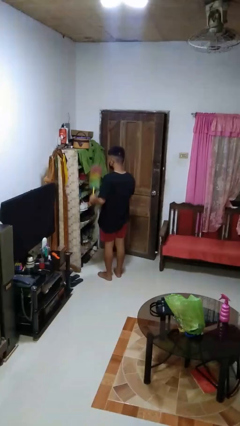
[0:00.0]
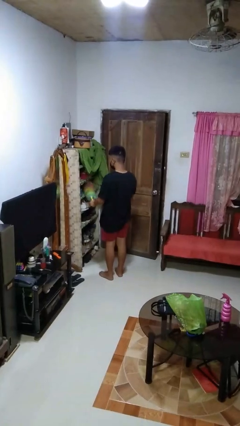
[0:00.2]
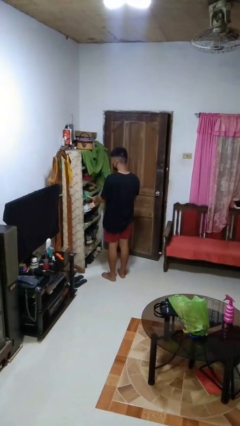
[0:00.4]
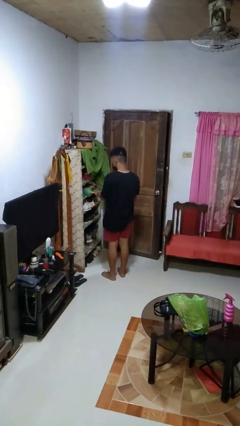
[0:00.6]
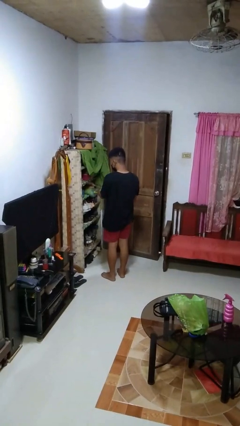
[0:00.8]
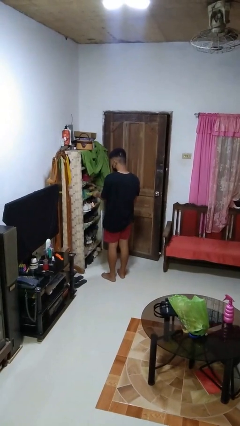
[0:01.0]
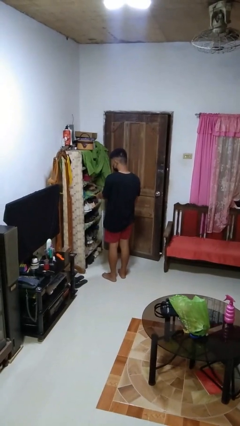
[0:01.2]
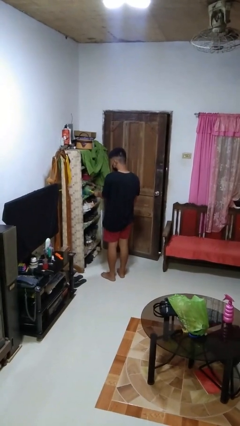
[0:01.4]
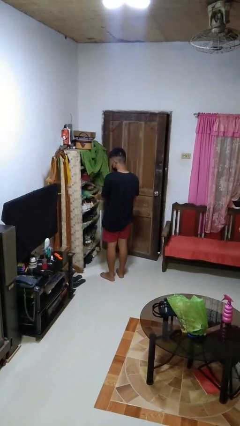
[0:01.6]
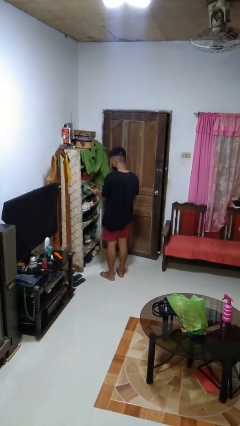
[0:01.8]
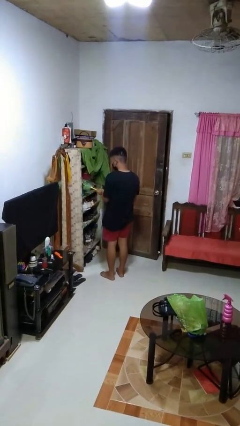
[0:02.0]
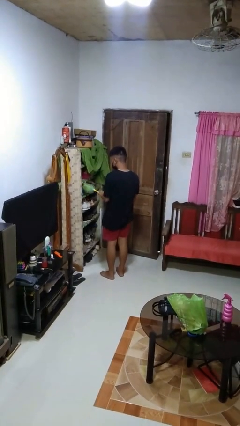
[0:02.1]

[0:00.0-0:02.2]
person dusts furniture

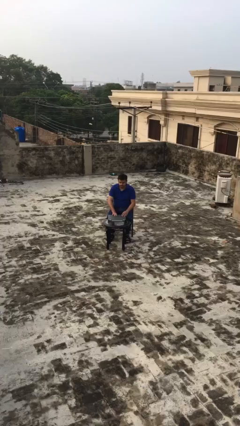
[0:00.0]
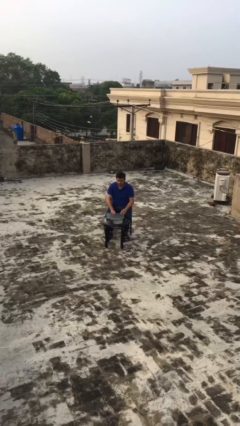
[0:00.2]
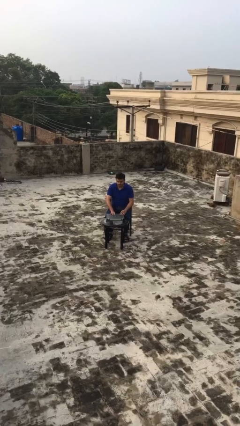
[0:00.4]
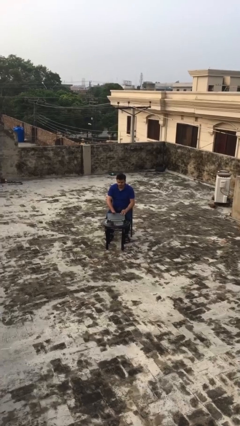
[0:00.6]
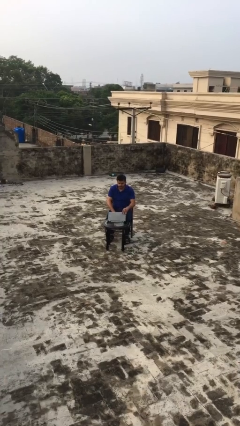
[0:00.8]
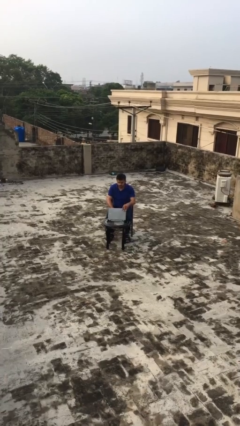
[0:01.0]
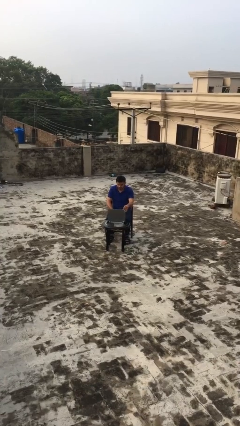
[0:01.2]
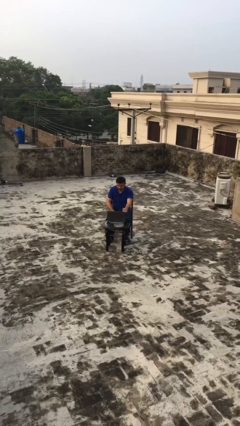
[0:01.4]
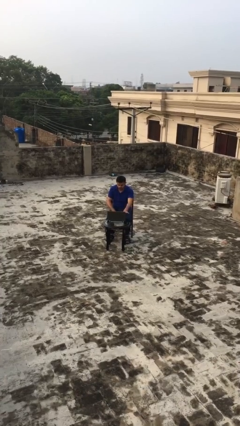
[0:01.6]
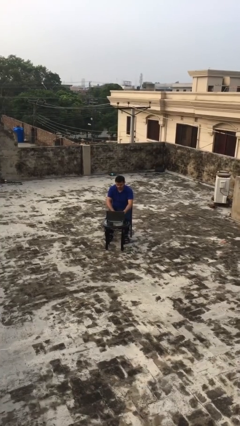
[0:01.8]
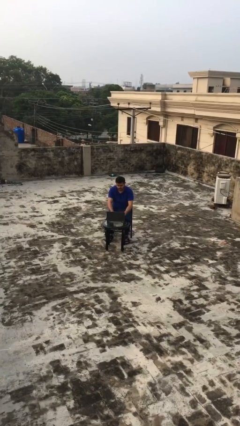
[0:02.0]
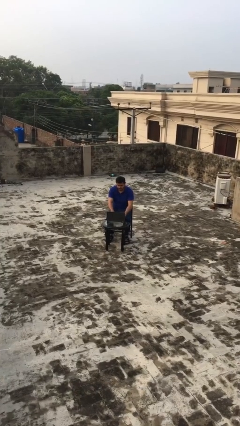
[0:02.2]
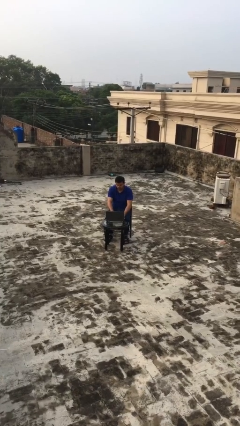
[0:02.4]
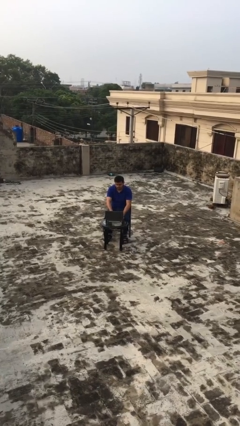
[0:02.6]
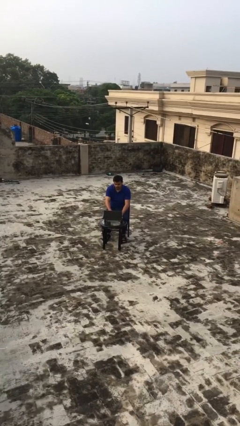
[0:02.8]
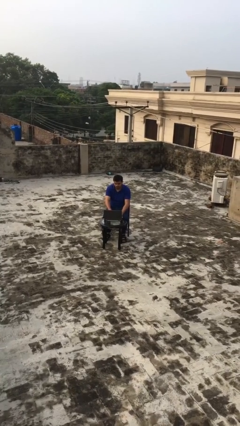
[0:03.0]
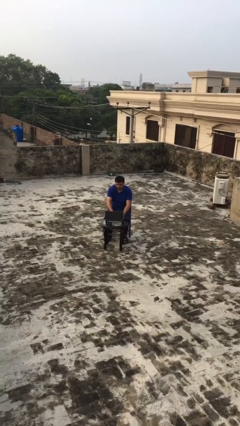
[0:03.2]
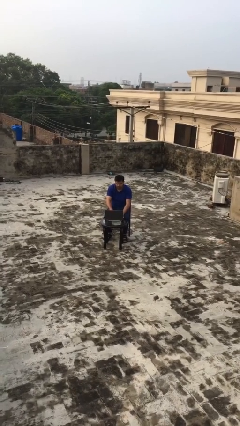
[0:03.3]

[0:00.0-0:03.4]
person interacts with laptop

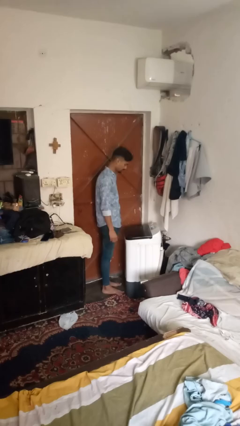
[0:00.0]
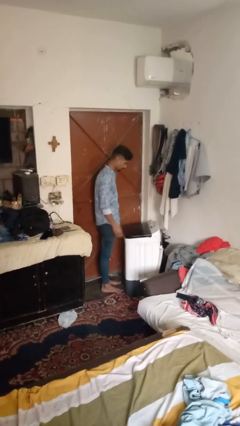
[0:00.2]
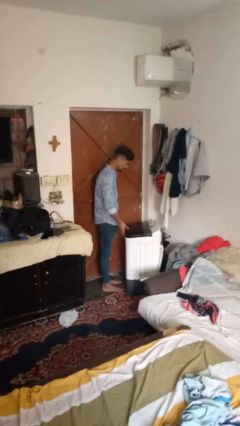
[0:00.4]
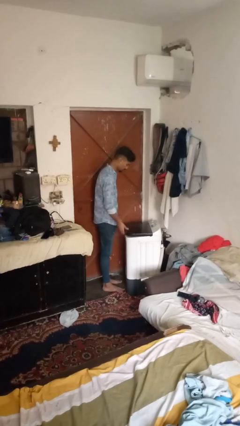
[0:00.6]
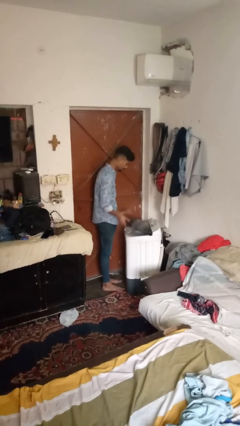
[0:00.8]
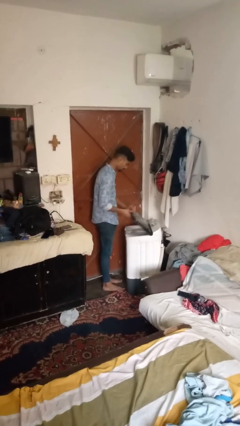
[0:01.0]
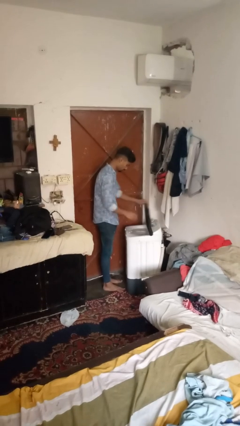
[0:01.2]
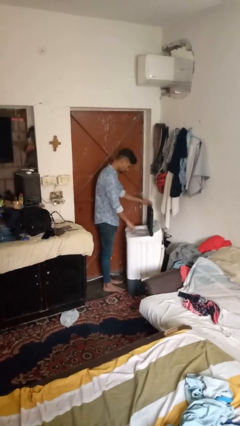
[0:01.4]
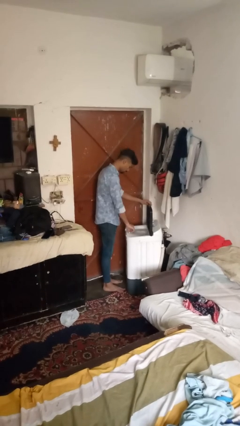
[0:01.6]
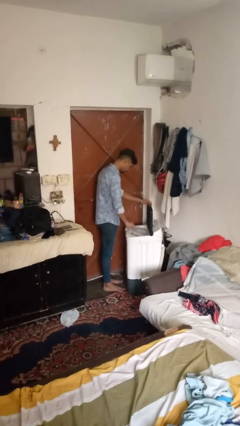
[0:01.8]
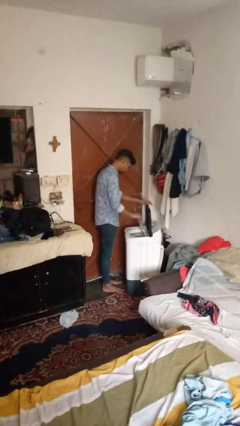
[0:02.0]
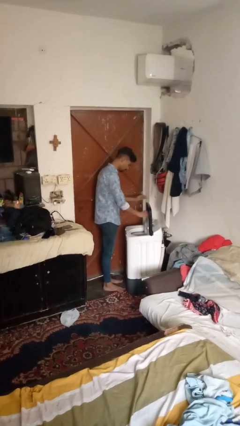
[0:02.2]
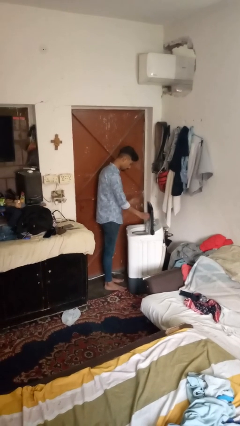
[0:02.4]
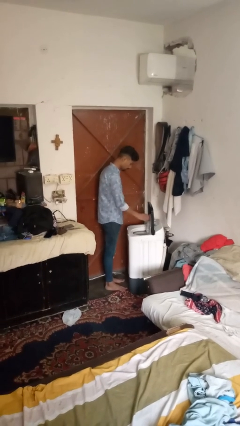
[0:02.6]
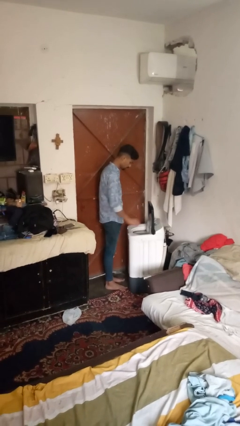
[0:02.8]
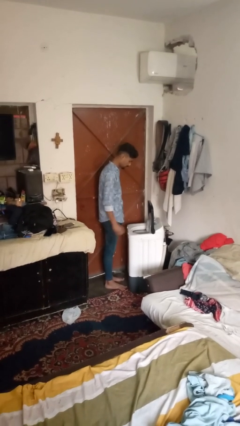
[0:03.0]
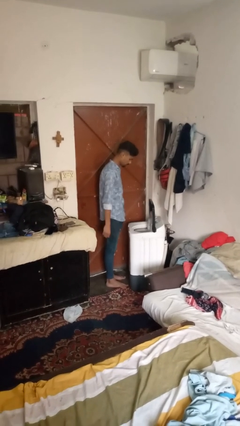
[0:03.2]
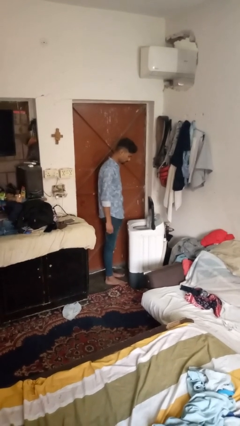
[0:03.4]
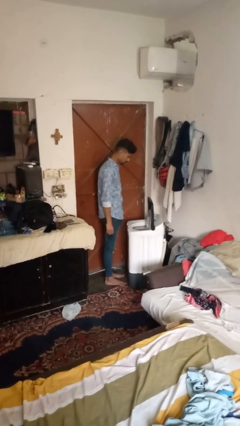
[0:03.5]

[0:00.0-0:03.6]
person opens clothes washer

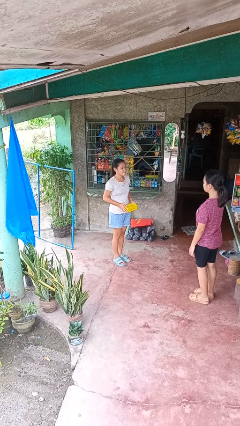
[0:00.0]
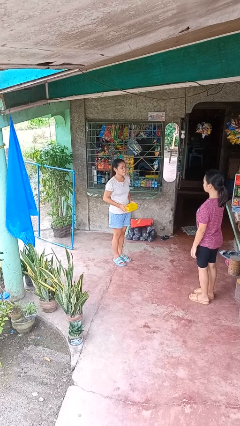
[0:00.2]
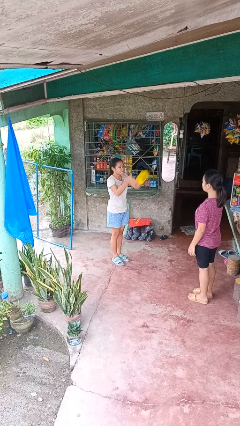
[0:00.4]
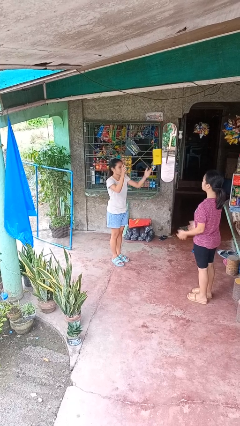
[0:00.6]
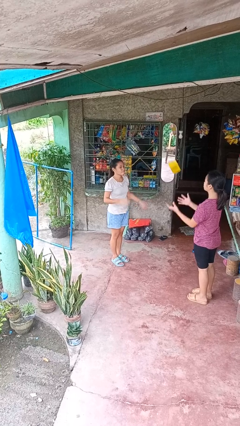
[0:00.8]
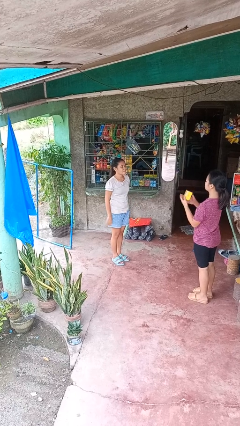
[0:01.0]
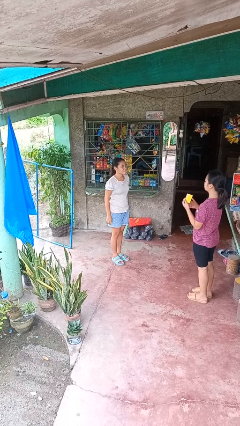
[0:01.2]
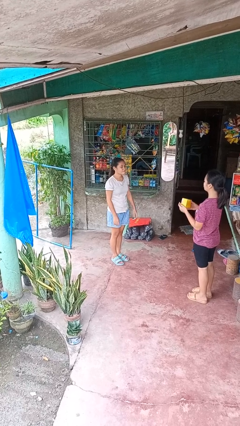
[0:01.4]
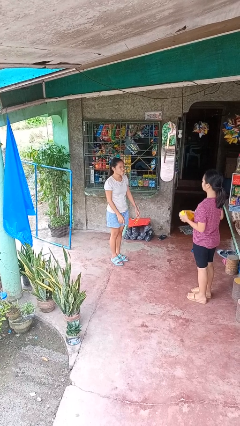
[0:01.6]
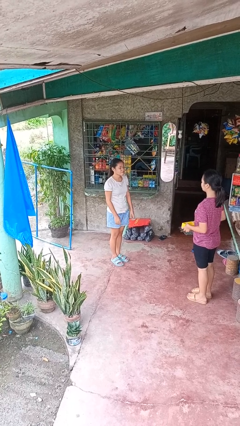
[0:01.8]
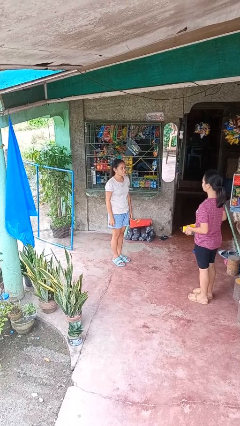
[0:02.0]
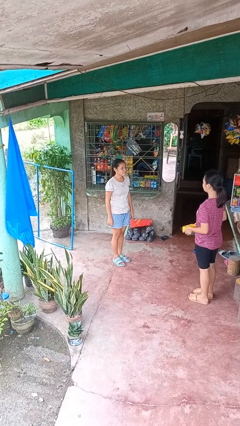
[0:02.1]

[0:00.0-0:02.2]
person throws object to person

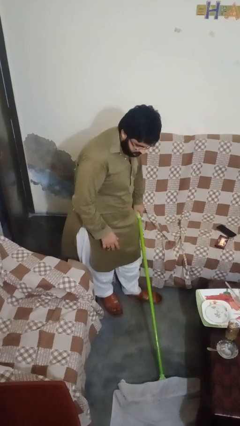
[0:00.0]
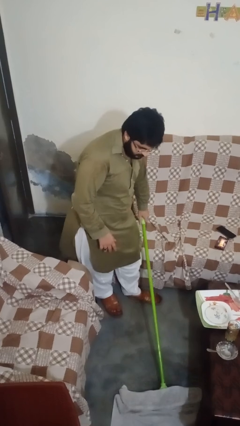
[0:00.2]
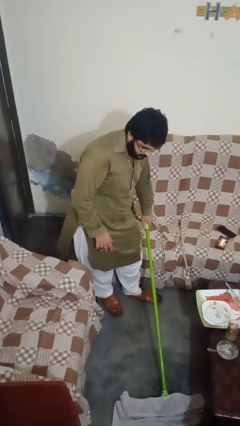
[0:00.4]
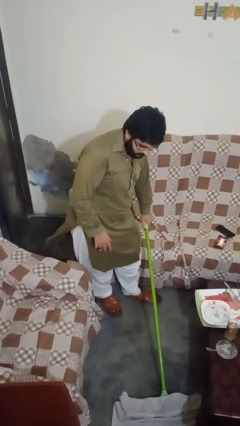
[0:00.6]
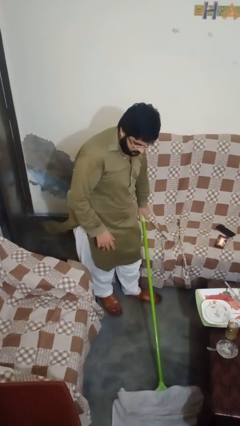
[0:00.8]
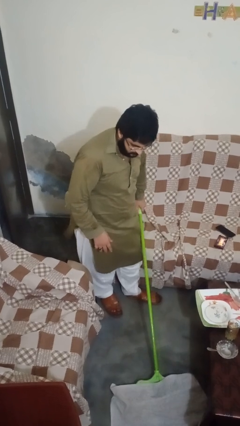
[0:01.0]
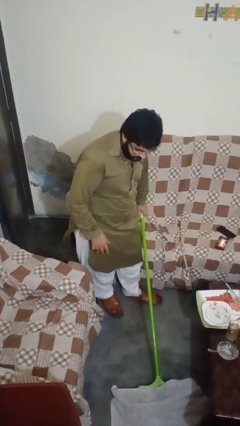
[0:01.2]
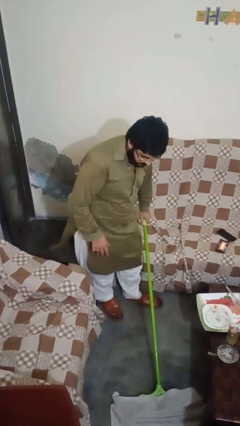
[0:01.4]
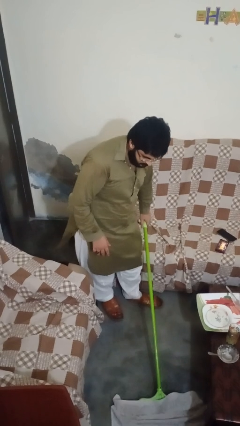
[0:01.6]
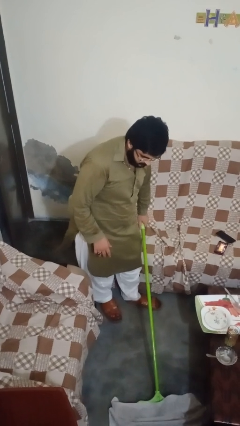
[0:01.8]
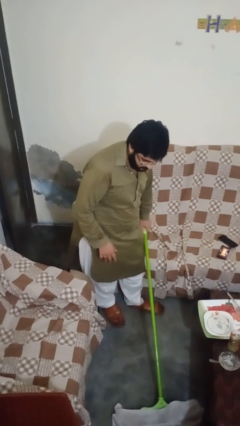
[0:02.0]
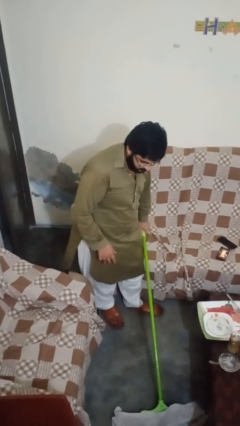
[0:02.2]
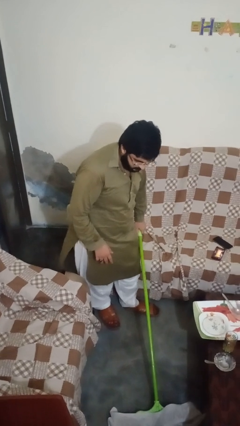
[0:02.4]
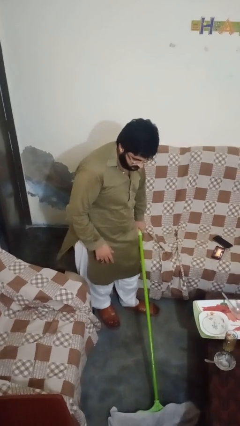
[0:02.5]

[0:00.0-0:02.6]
person mops

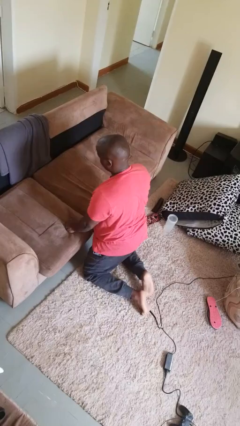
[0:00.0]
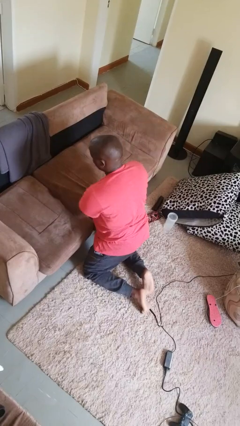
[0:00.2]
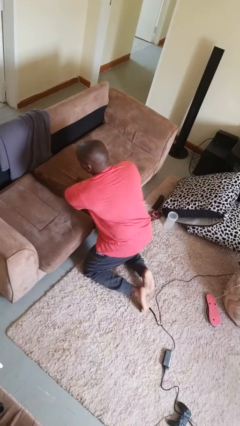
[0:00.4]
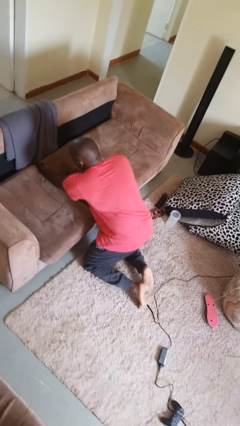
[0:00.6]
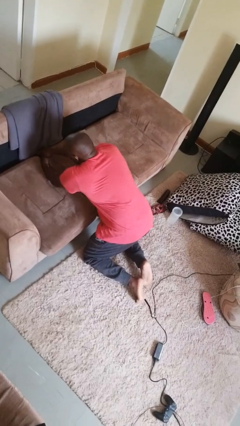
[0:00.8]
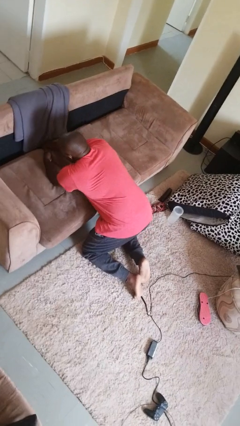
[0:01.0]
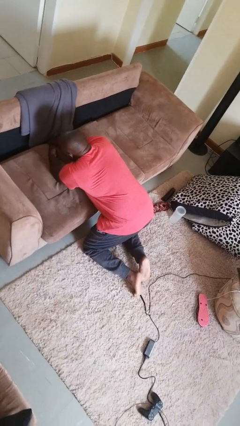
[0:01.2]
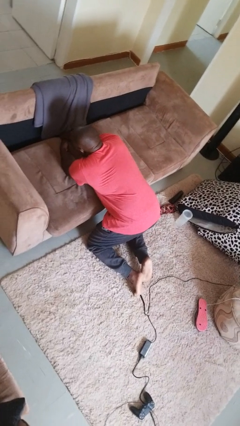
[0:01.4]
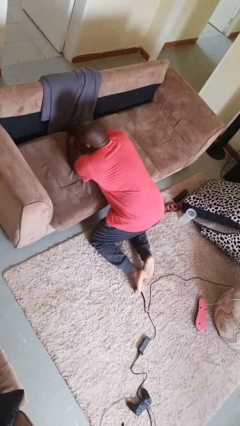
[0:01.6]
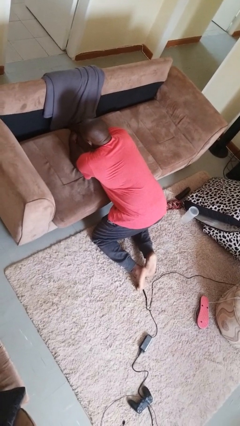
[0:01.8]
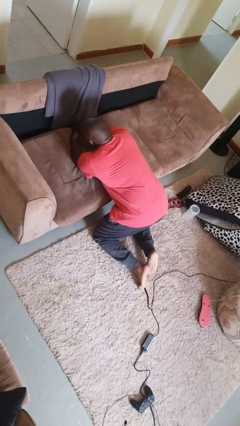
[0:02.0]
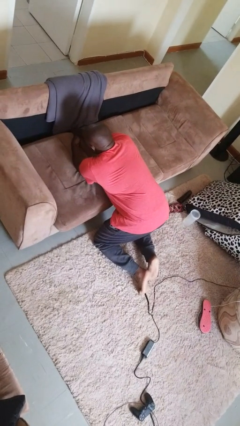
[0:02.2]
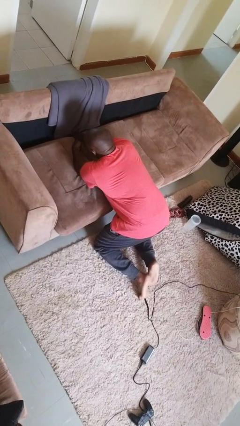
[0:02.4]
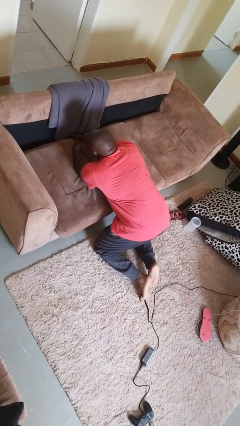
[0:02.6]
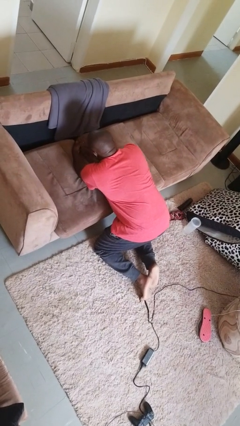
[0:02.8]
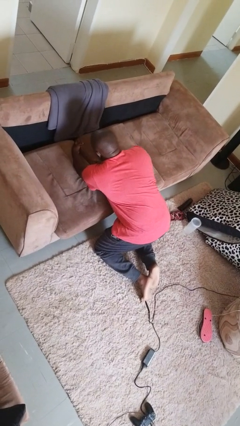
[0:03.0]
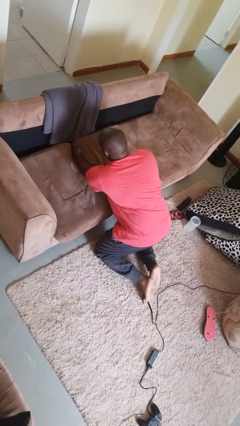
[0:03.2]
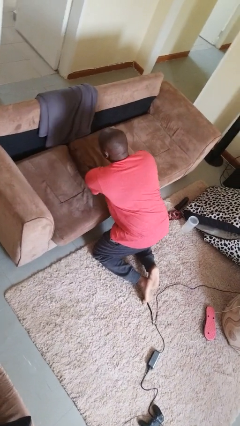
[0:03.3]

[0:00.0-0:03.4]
person searches in couch
